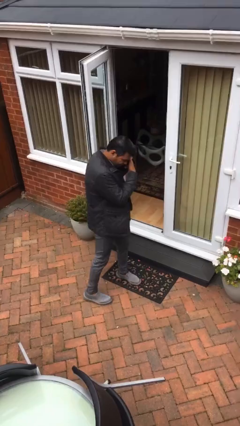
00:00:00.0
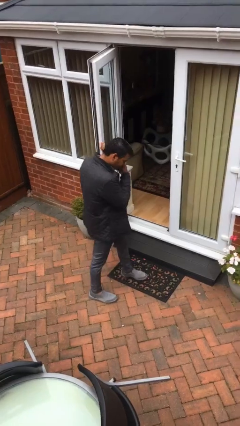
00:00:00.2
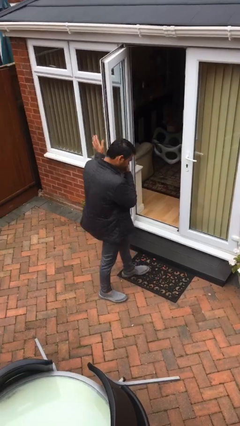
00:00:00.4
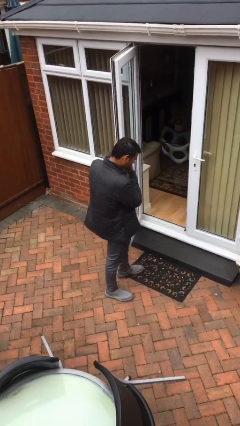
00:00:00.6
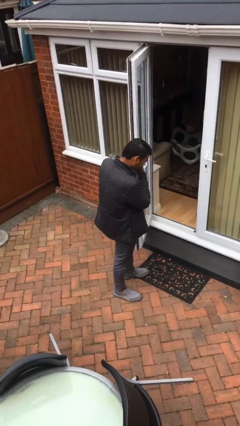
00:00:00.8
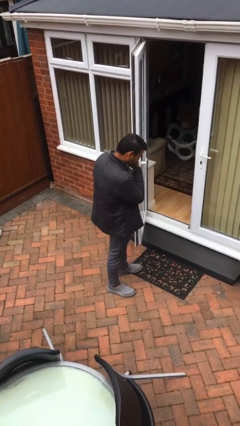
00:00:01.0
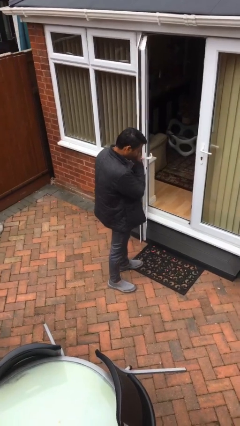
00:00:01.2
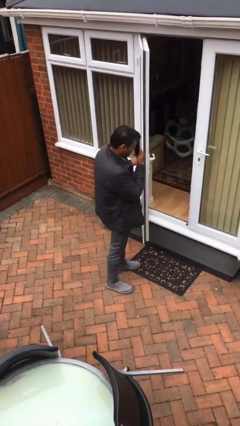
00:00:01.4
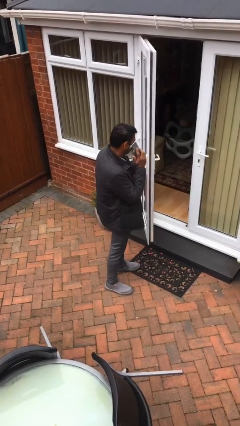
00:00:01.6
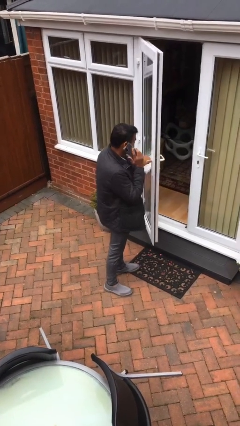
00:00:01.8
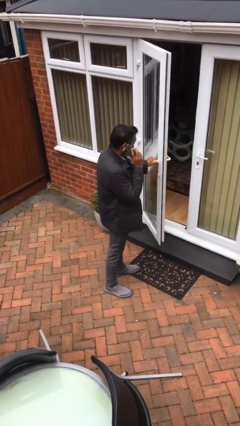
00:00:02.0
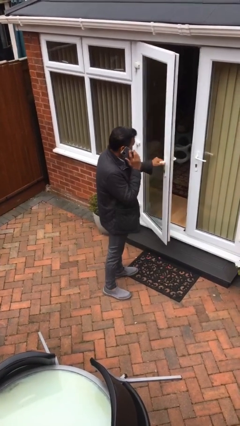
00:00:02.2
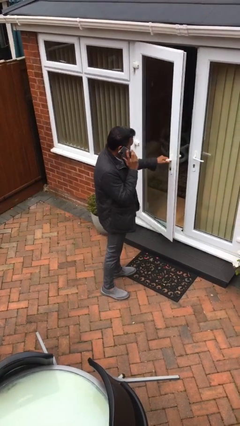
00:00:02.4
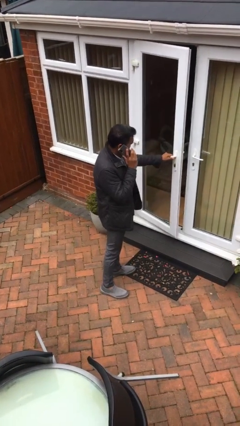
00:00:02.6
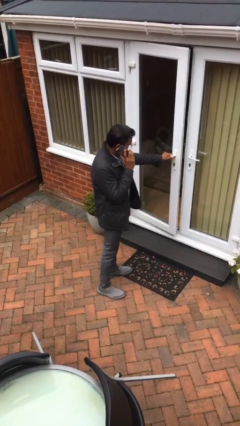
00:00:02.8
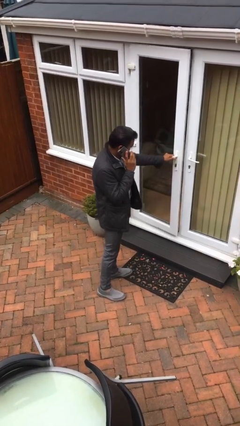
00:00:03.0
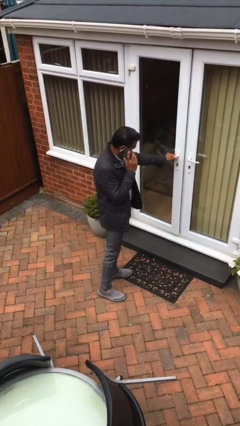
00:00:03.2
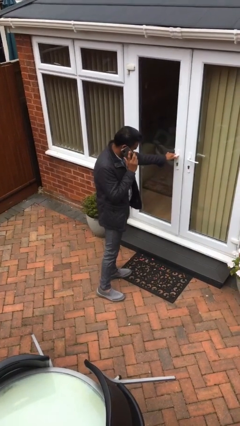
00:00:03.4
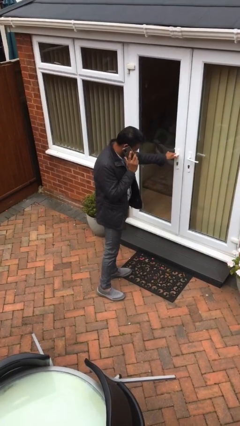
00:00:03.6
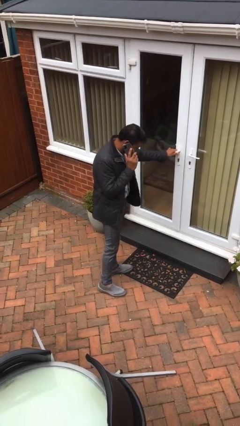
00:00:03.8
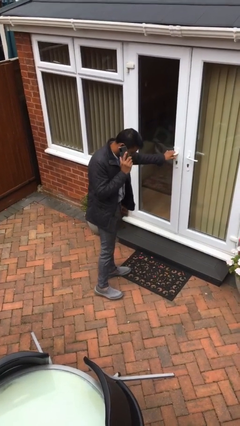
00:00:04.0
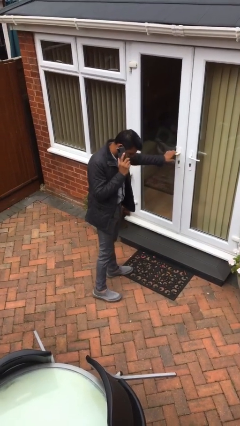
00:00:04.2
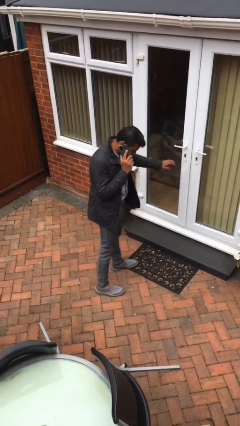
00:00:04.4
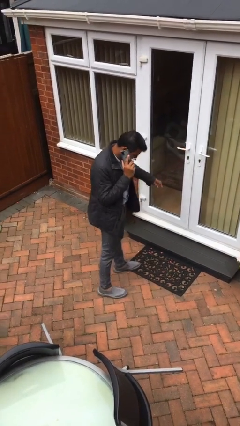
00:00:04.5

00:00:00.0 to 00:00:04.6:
person closes facility door

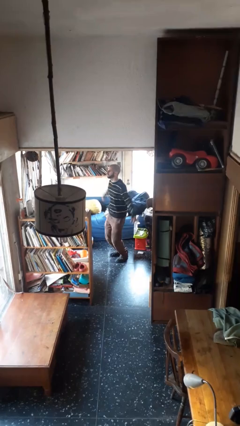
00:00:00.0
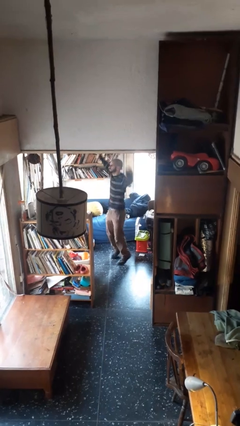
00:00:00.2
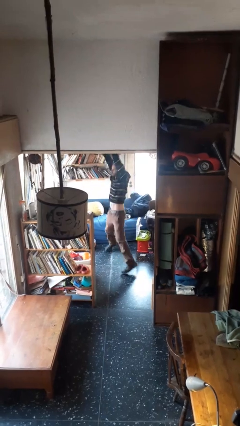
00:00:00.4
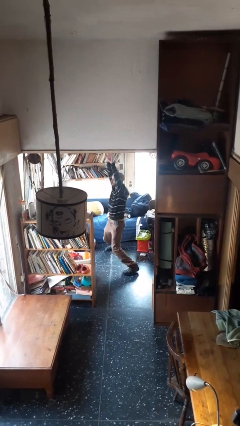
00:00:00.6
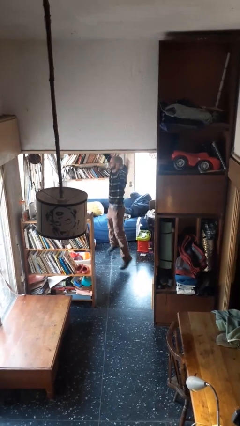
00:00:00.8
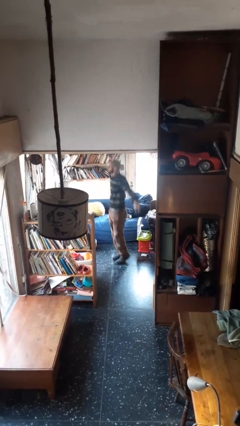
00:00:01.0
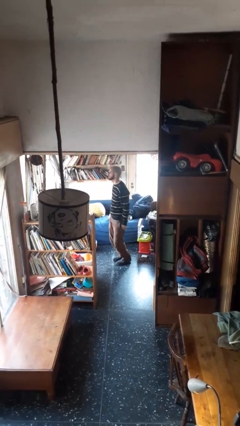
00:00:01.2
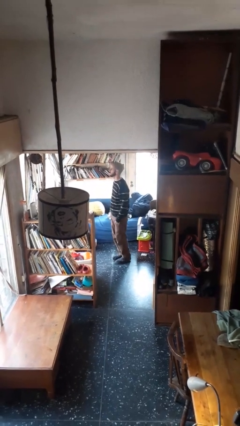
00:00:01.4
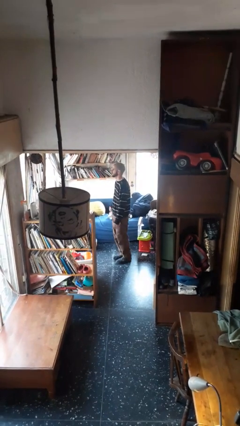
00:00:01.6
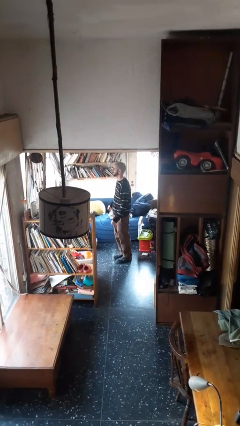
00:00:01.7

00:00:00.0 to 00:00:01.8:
person exercises with jumping jacks

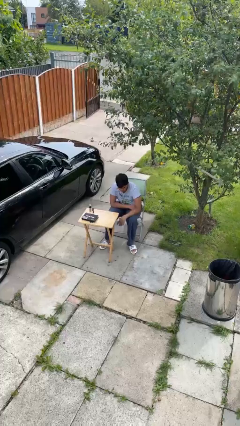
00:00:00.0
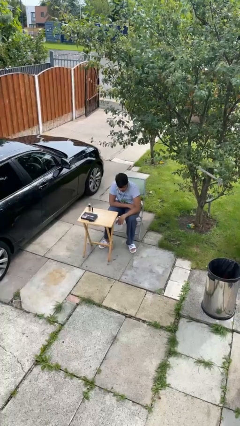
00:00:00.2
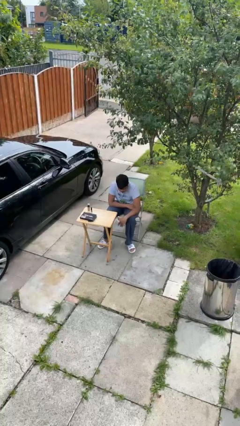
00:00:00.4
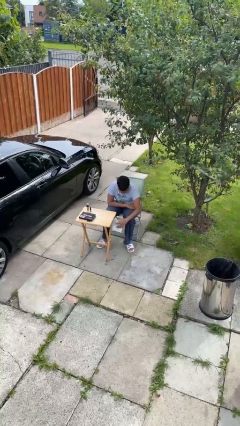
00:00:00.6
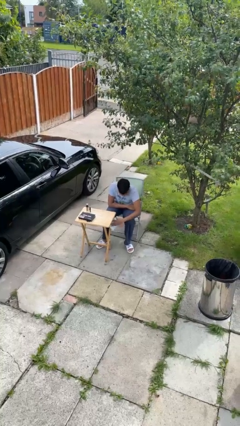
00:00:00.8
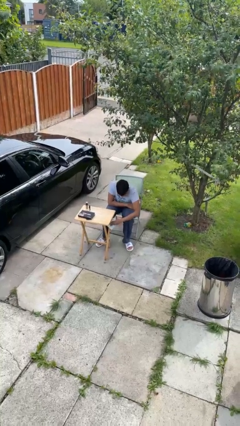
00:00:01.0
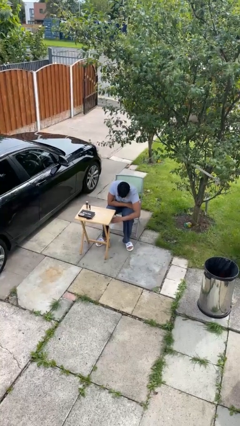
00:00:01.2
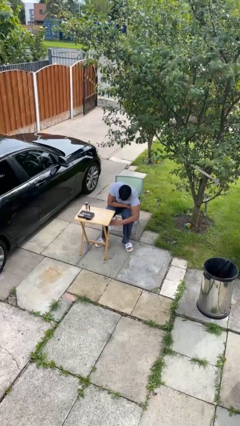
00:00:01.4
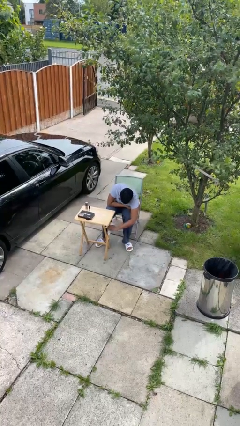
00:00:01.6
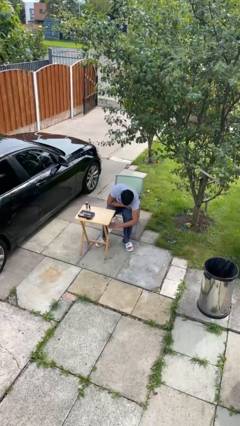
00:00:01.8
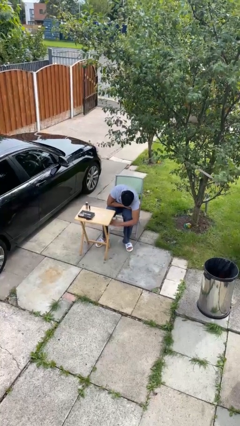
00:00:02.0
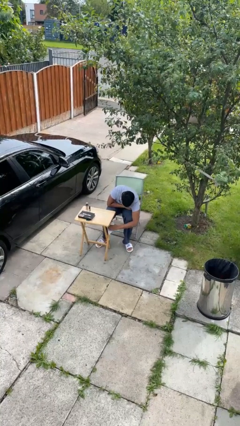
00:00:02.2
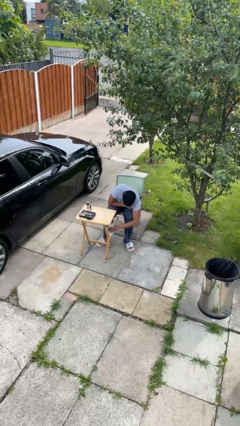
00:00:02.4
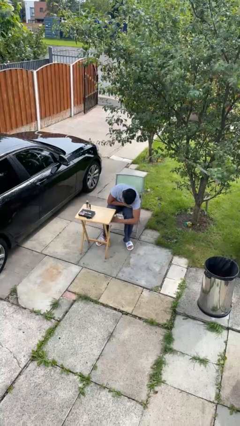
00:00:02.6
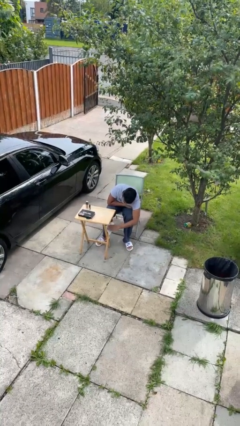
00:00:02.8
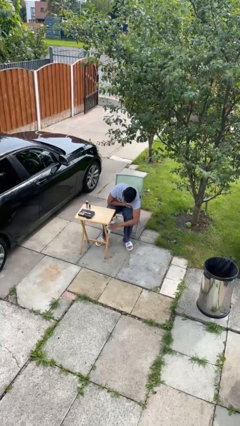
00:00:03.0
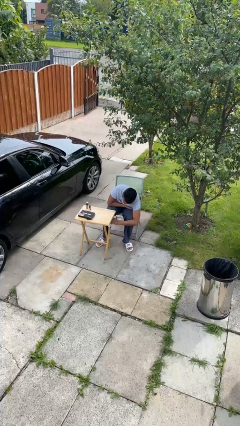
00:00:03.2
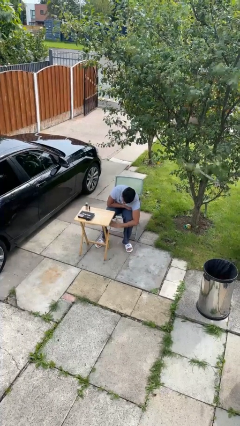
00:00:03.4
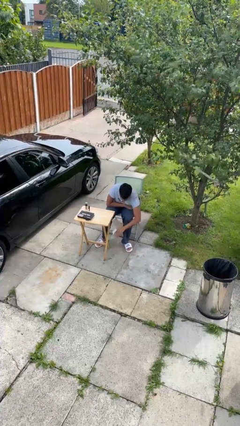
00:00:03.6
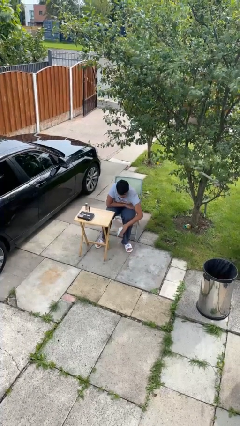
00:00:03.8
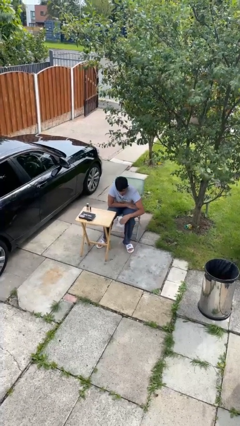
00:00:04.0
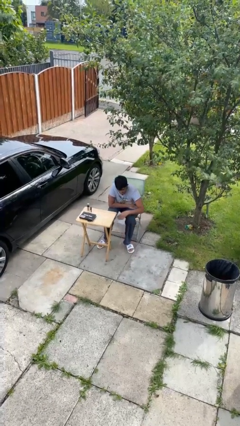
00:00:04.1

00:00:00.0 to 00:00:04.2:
person cleans table with rag

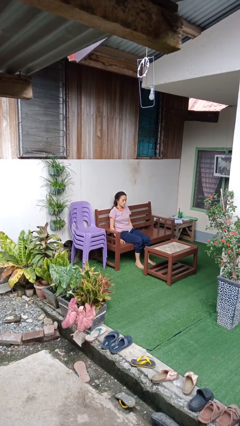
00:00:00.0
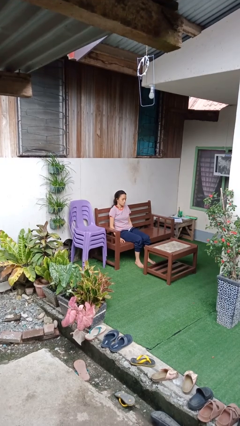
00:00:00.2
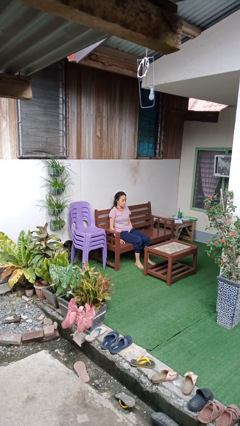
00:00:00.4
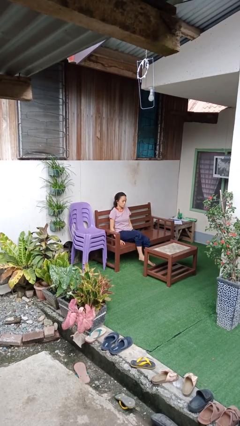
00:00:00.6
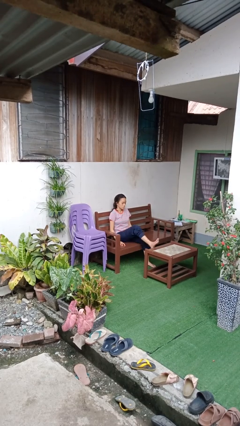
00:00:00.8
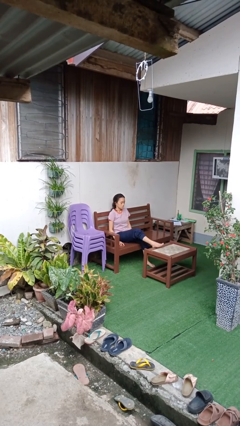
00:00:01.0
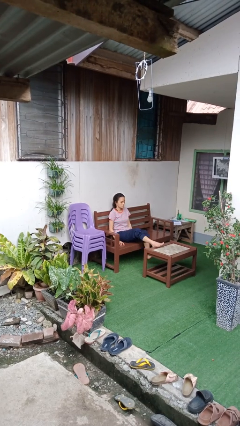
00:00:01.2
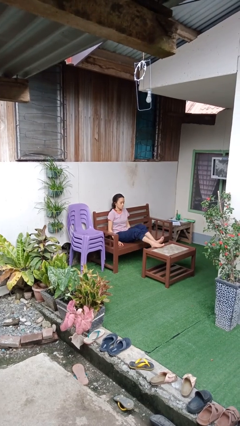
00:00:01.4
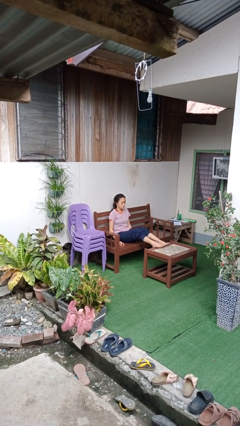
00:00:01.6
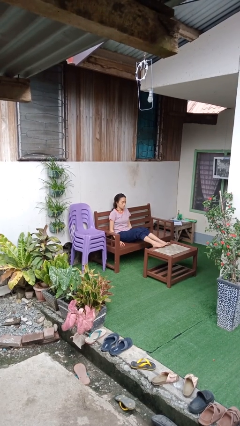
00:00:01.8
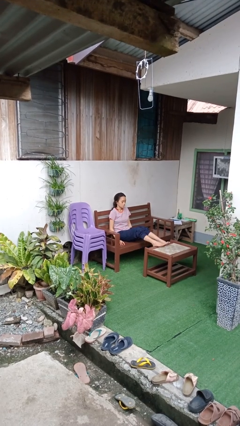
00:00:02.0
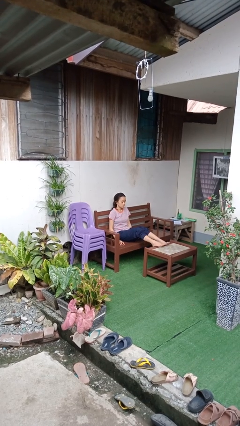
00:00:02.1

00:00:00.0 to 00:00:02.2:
person puts feet up

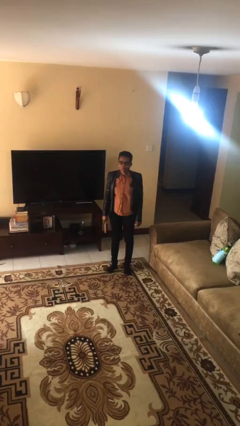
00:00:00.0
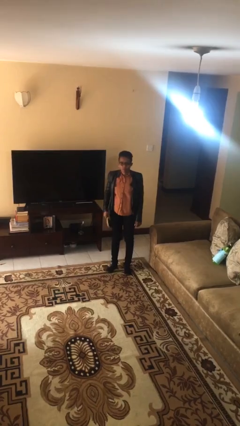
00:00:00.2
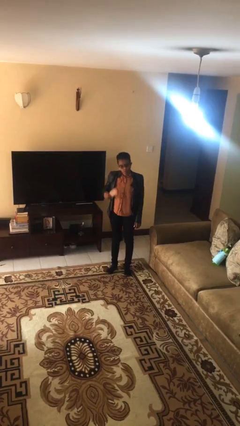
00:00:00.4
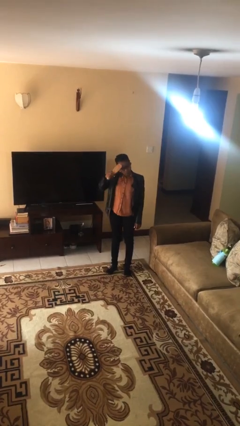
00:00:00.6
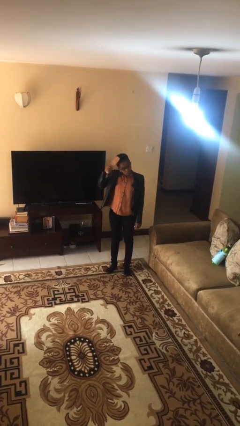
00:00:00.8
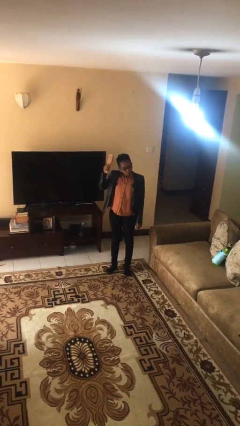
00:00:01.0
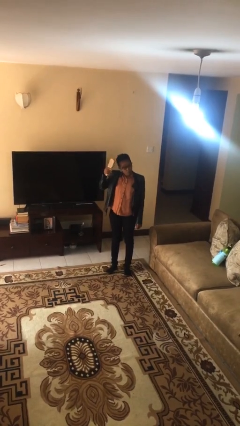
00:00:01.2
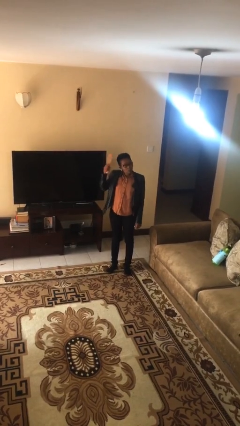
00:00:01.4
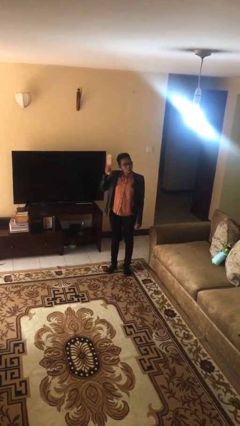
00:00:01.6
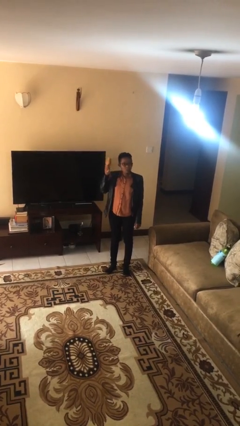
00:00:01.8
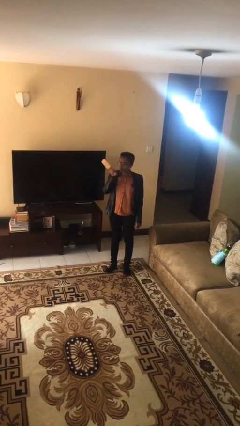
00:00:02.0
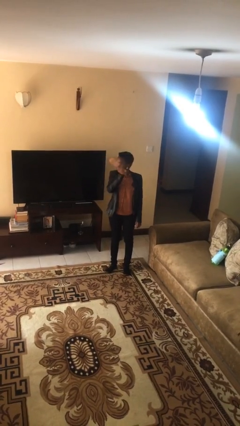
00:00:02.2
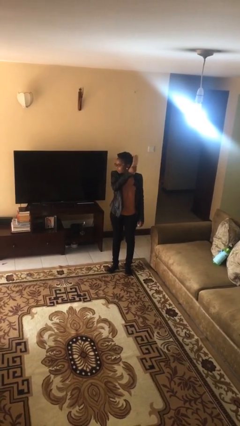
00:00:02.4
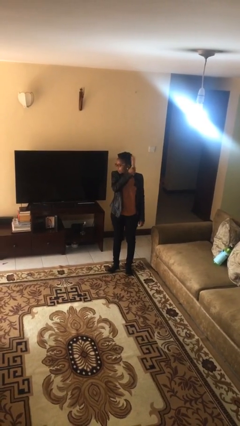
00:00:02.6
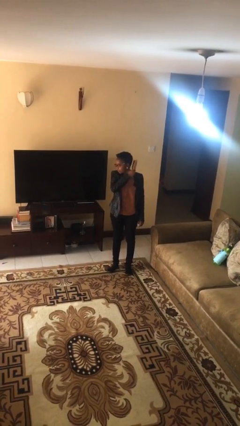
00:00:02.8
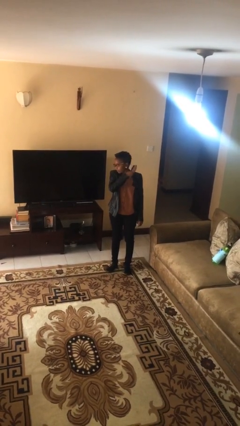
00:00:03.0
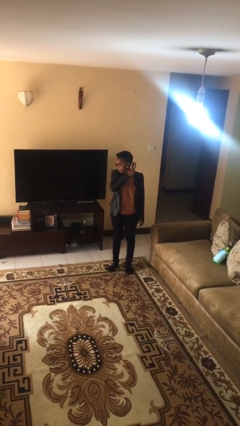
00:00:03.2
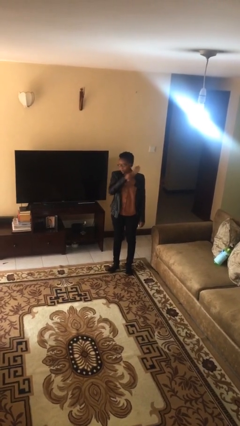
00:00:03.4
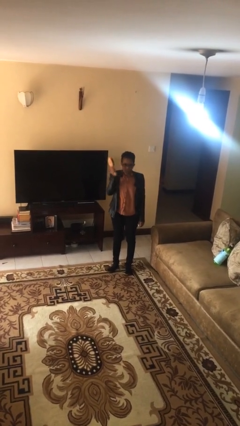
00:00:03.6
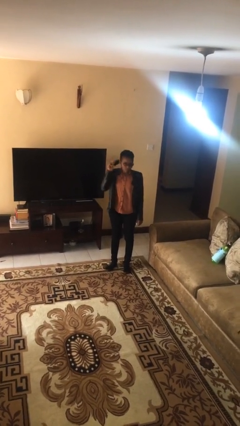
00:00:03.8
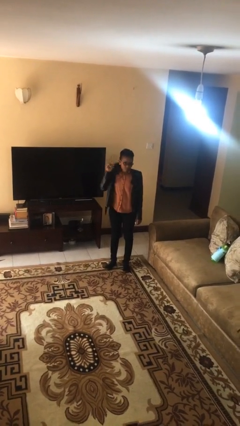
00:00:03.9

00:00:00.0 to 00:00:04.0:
person brushes hair

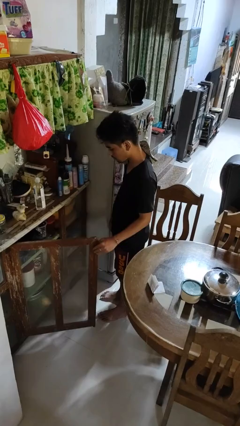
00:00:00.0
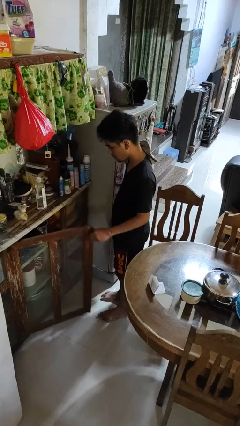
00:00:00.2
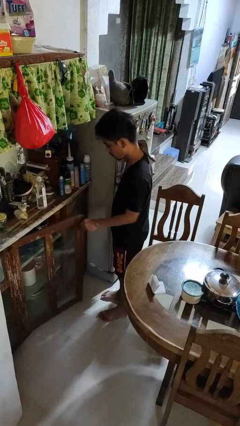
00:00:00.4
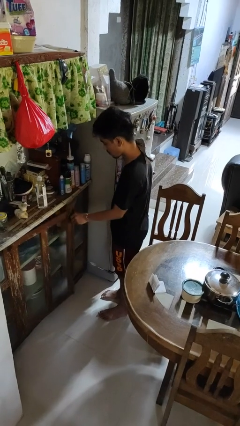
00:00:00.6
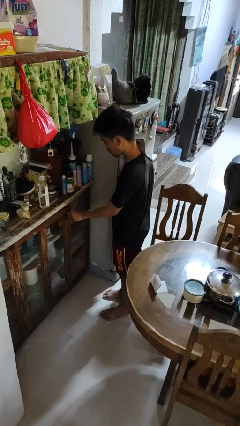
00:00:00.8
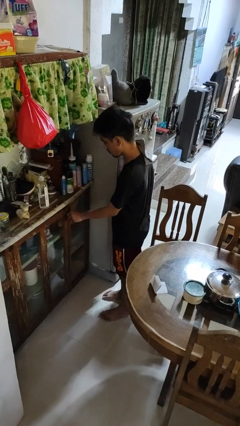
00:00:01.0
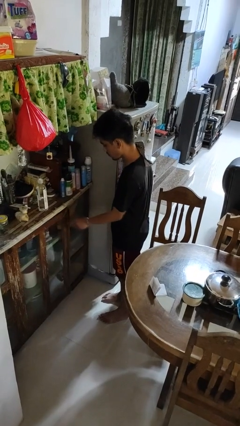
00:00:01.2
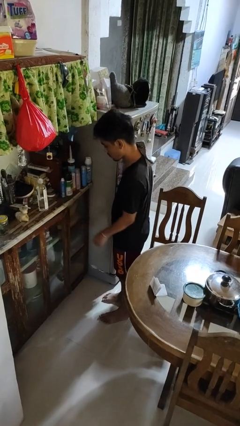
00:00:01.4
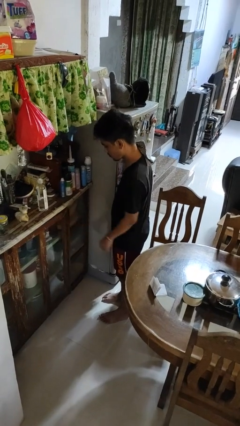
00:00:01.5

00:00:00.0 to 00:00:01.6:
person closes cabinet
